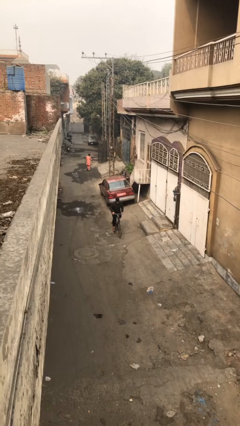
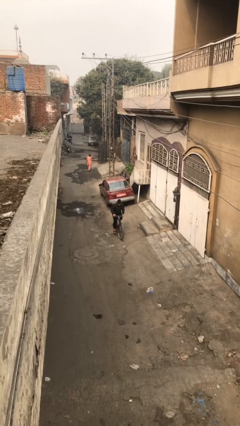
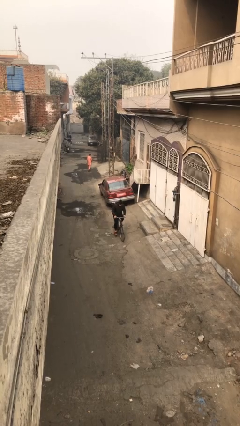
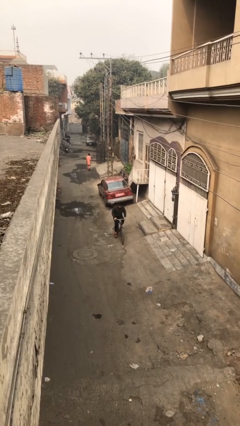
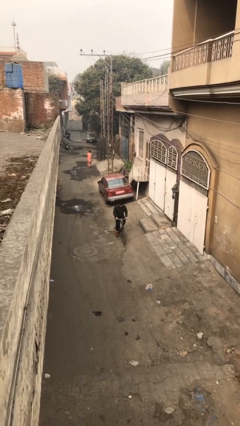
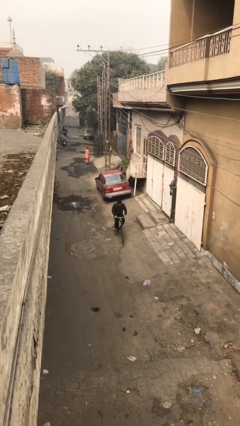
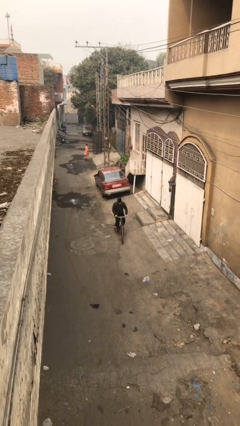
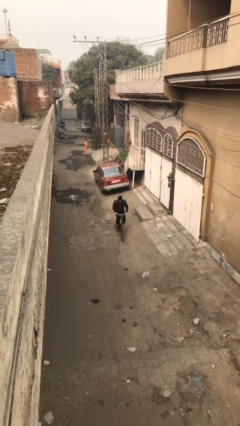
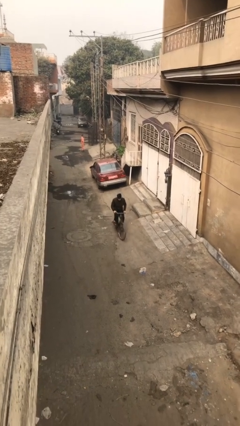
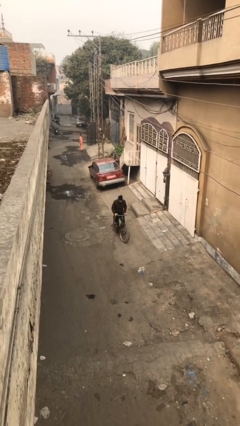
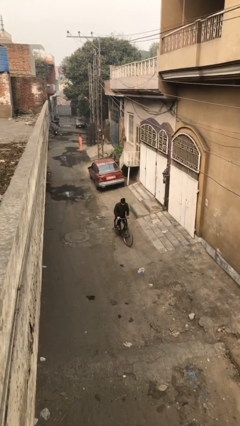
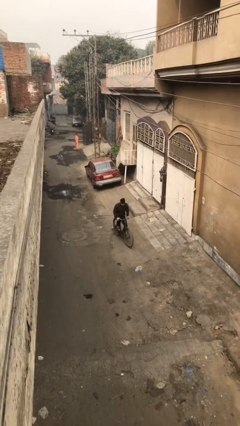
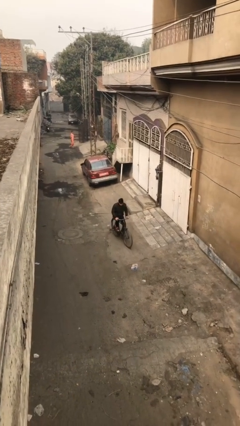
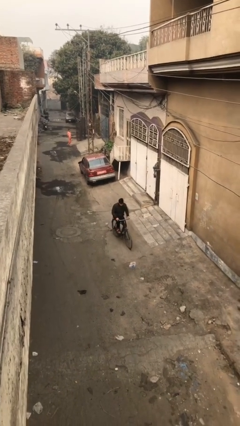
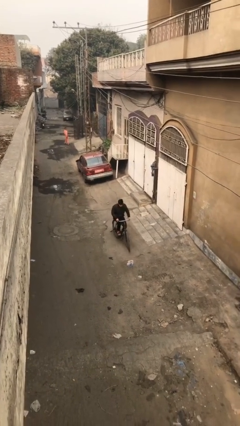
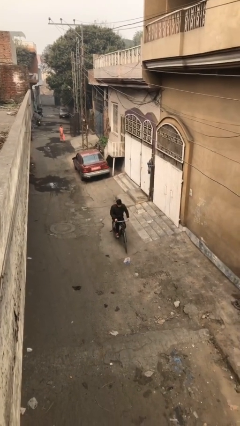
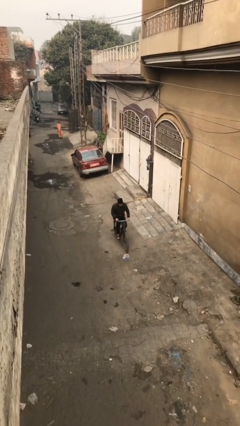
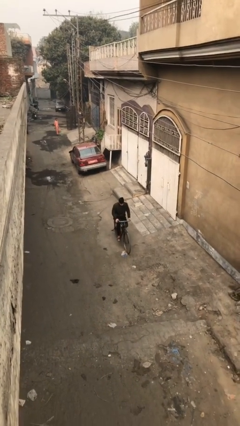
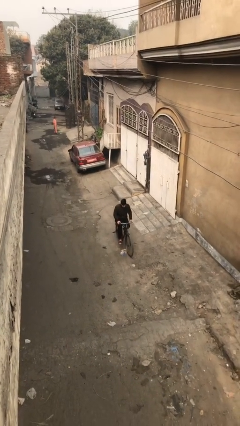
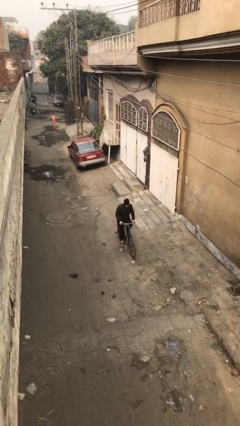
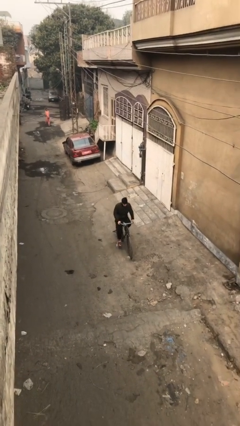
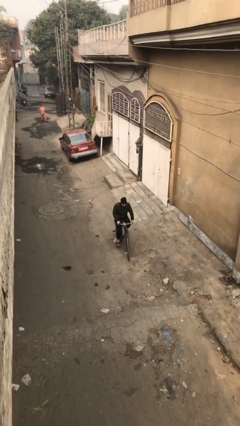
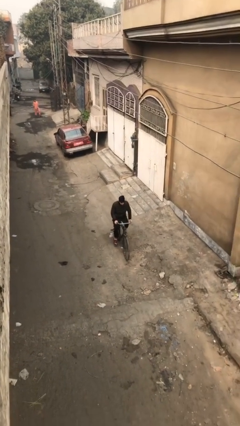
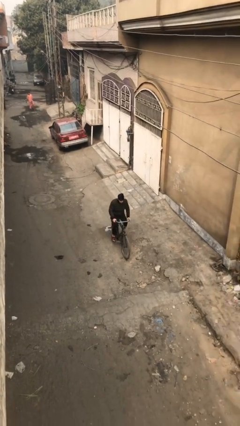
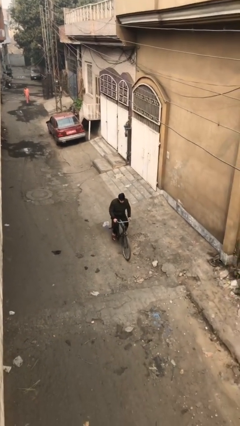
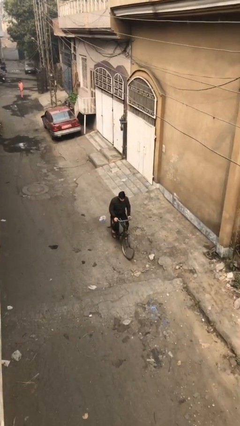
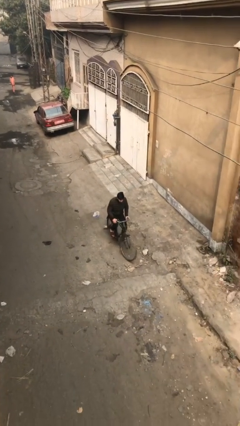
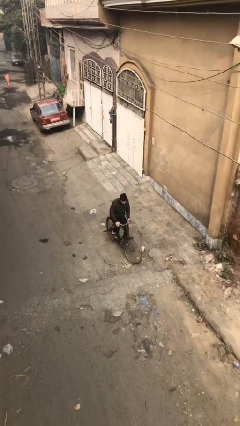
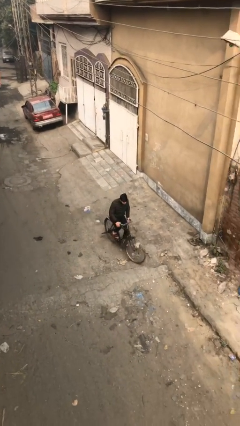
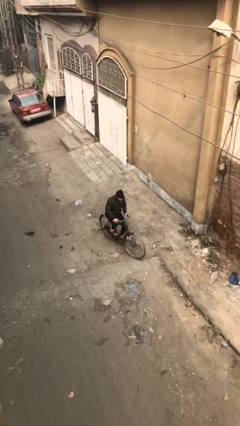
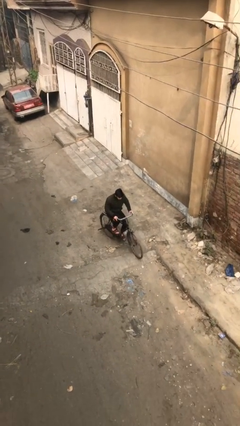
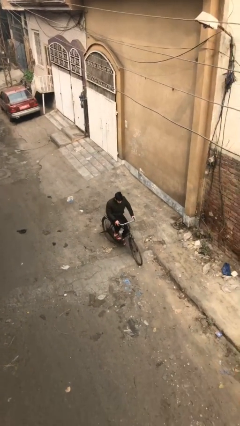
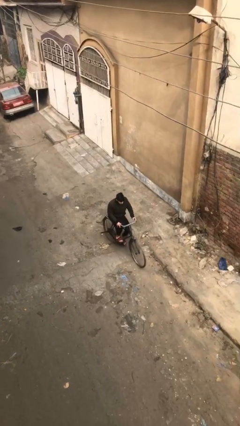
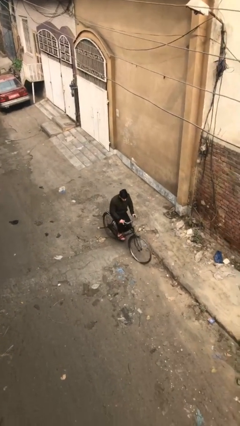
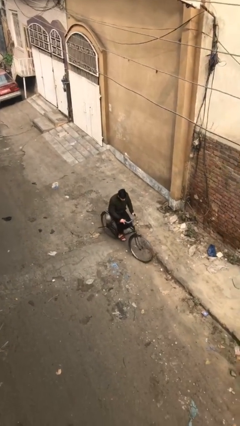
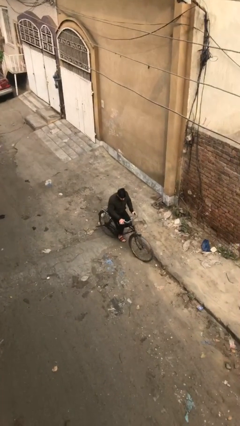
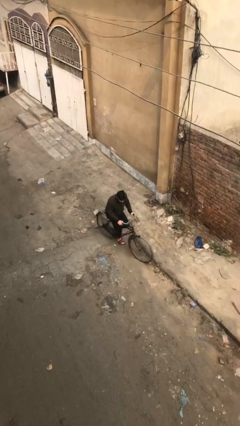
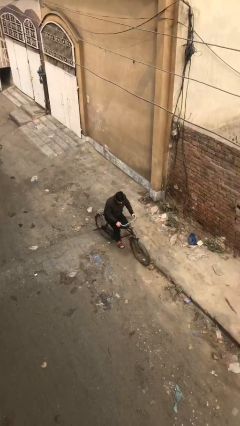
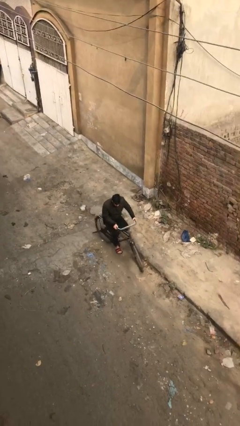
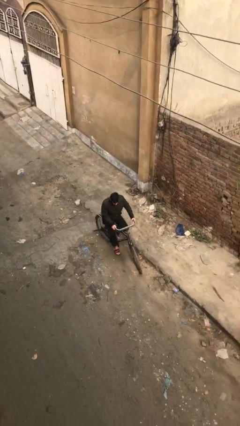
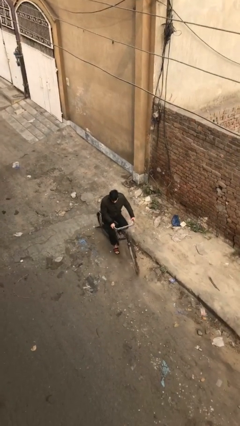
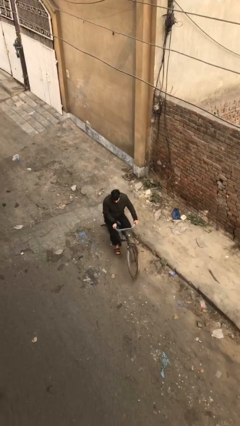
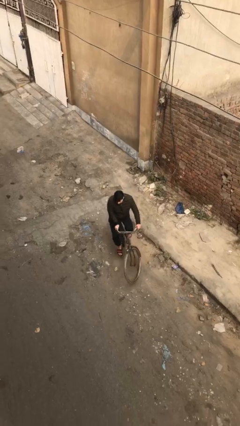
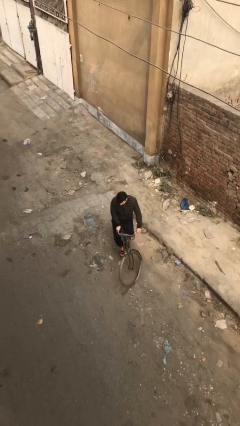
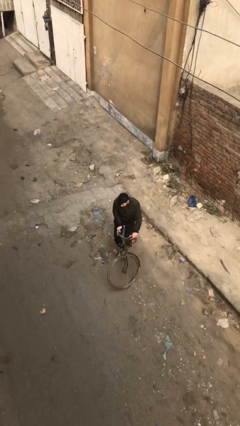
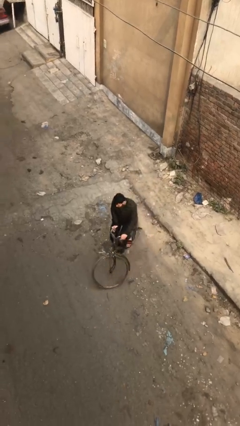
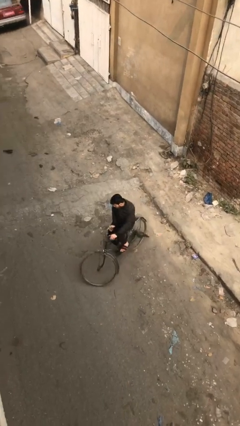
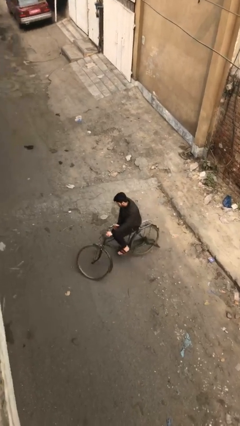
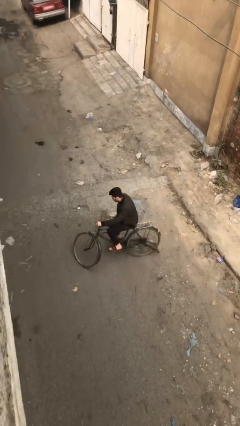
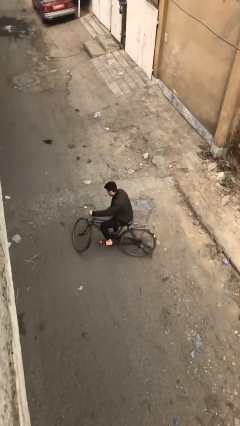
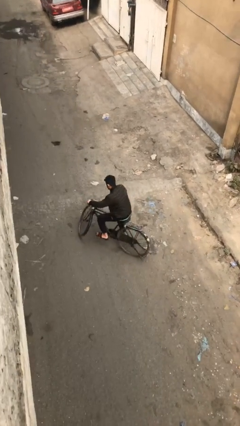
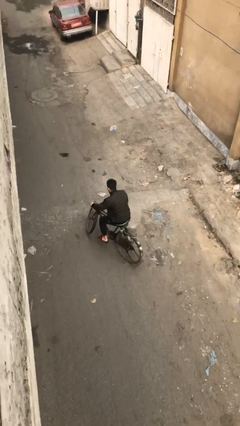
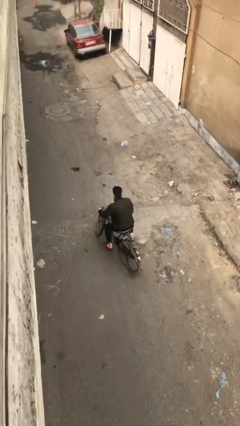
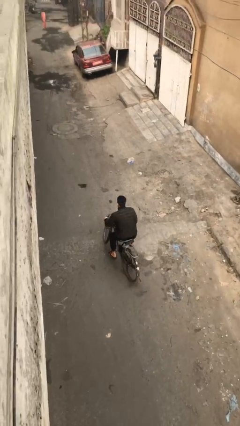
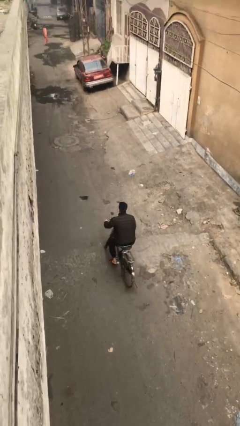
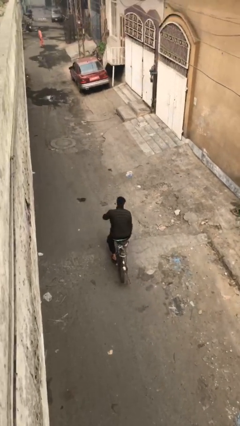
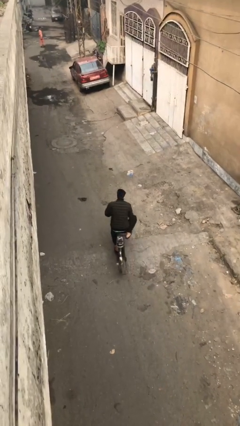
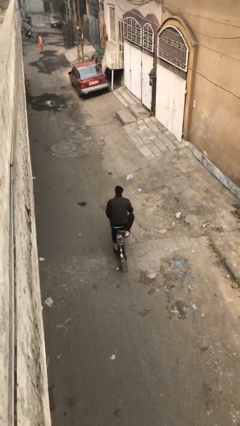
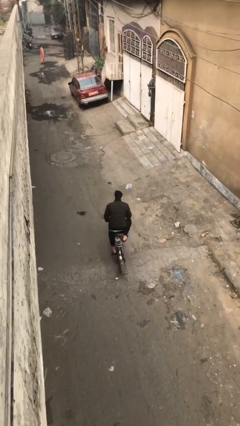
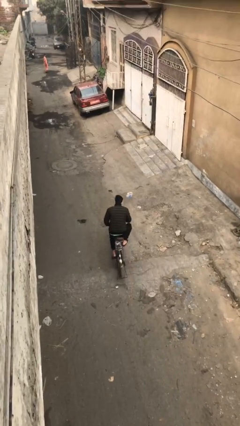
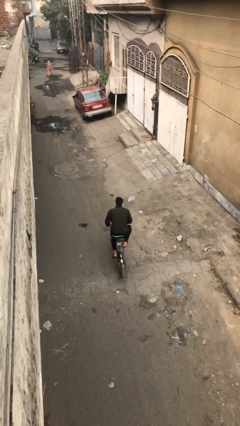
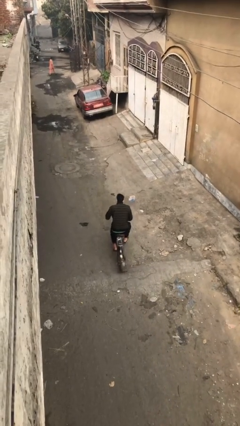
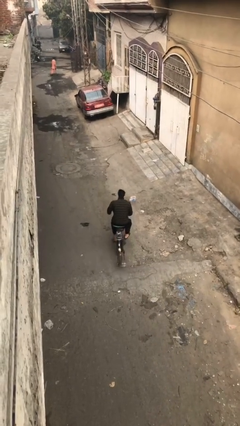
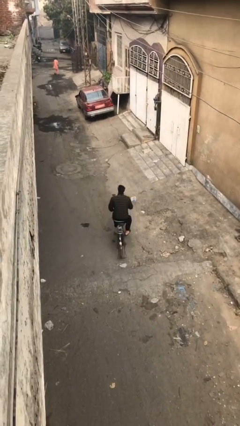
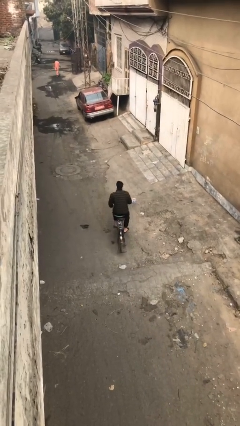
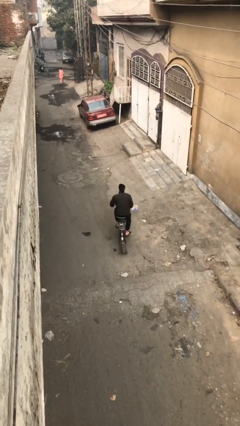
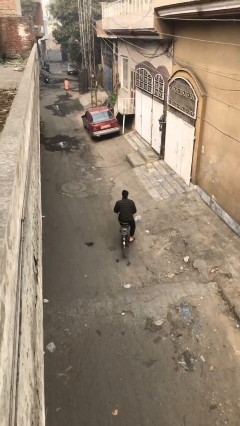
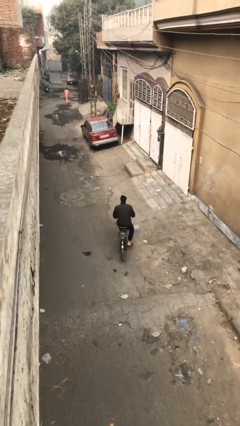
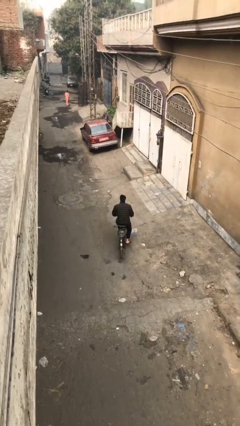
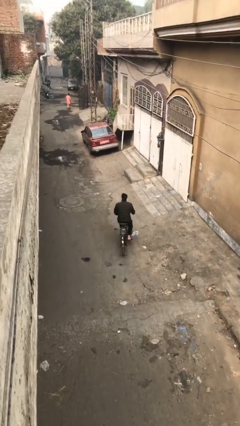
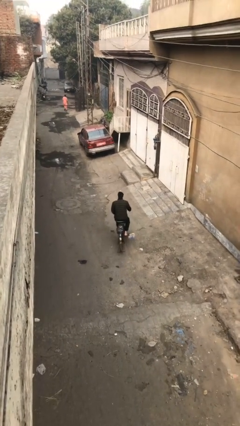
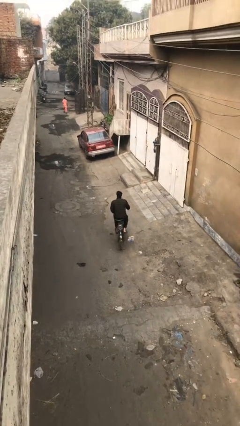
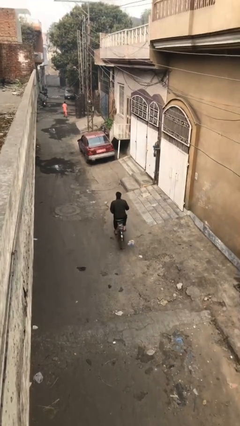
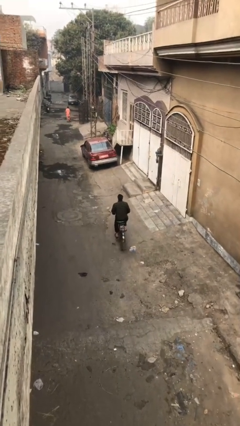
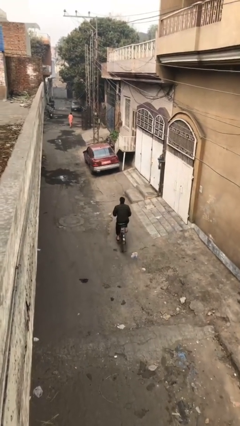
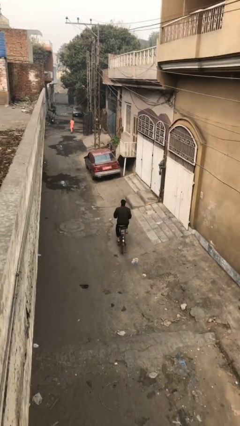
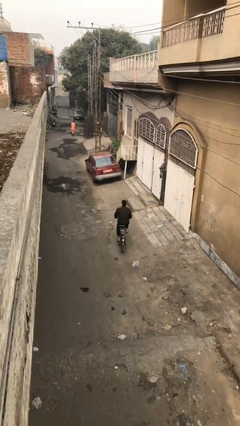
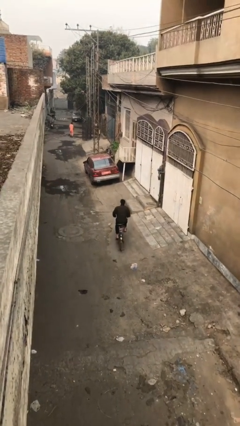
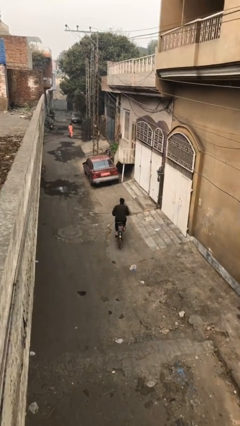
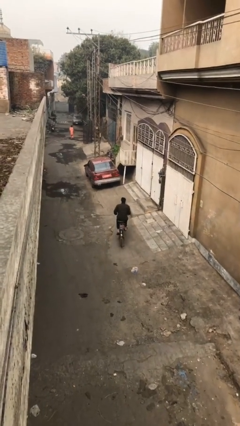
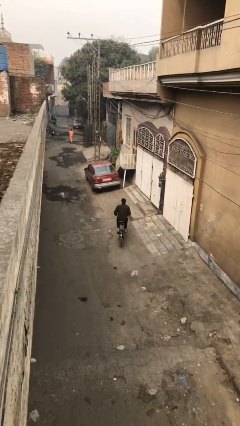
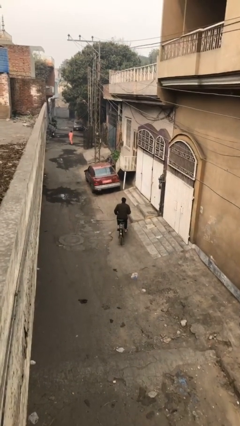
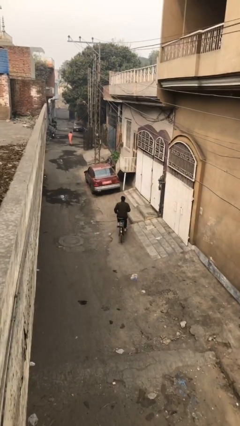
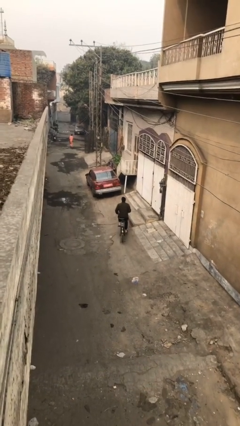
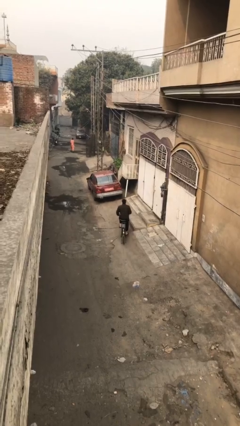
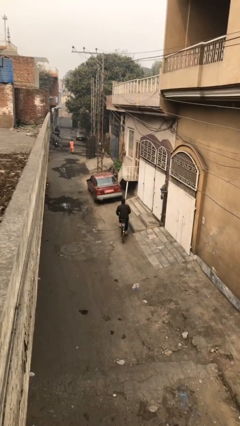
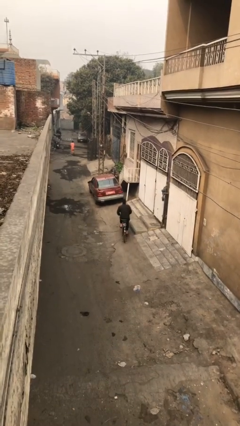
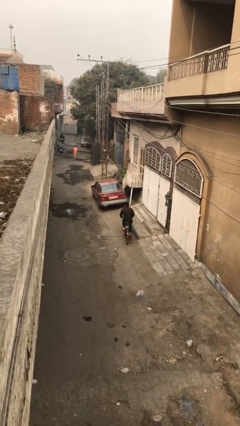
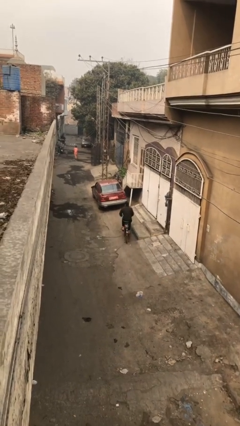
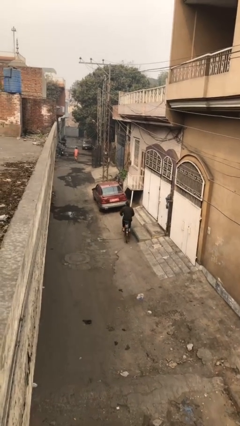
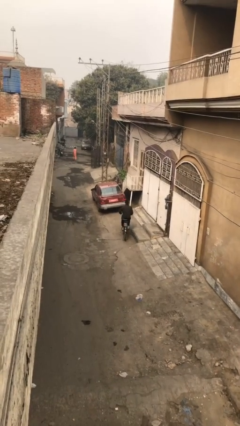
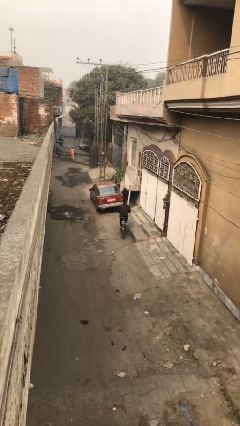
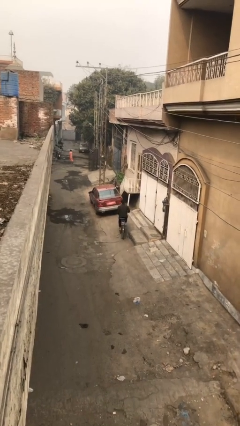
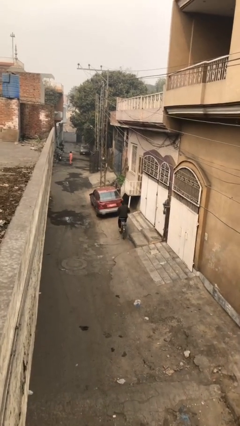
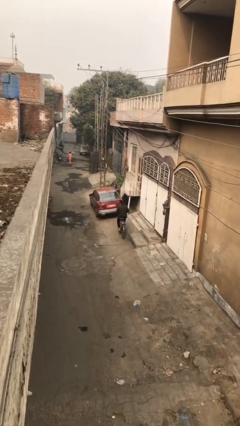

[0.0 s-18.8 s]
person rides bicycle
